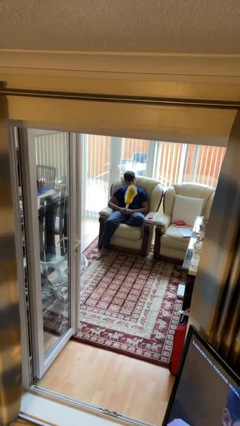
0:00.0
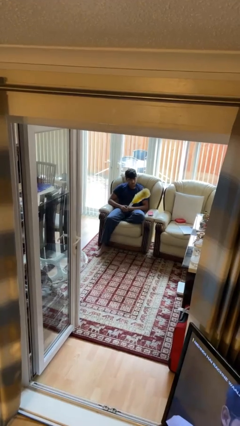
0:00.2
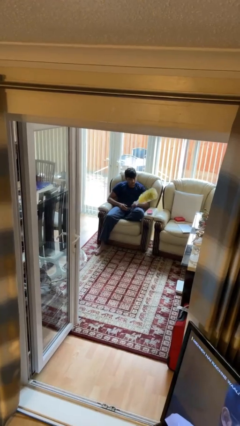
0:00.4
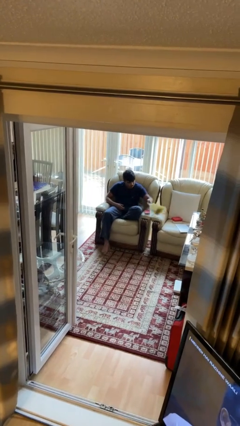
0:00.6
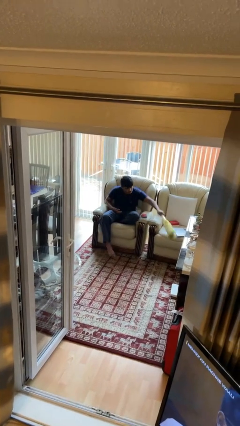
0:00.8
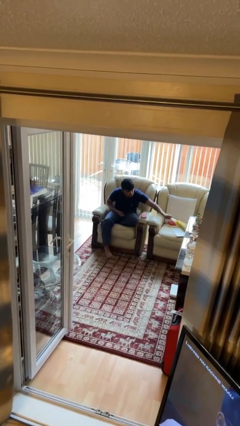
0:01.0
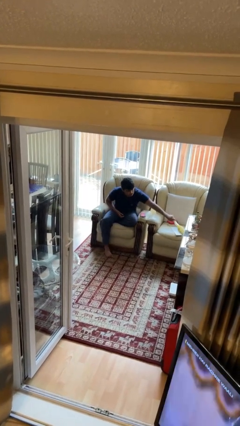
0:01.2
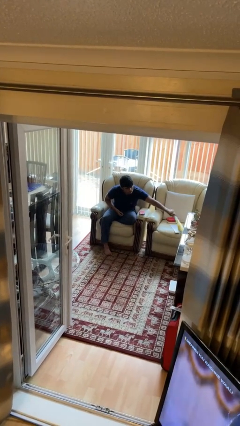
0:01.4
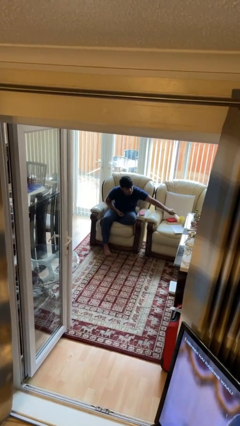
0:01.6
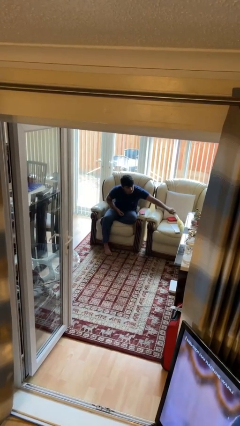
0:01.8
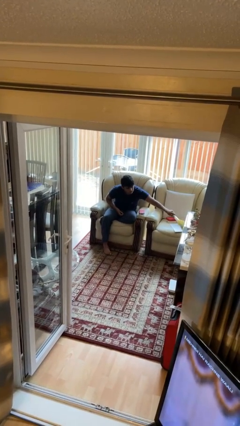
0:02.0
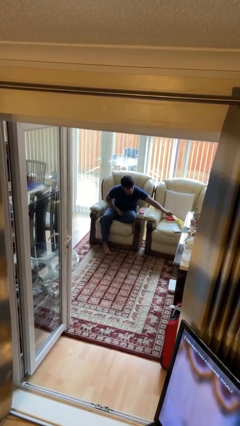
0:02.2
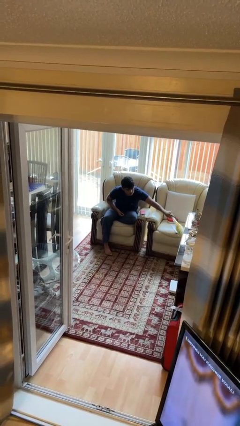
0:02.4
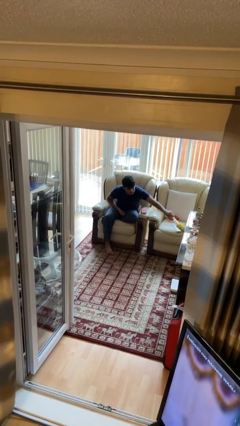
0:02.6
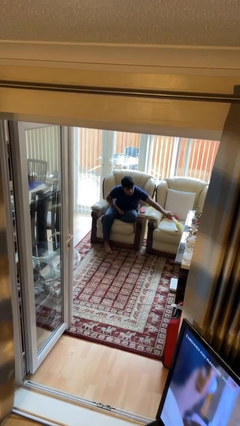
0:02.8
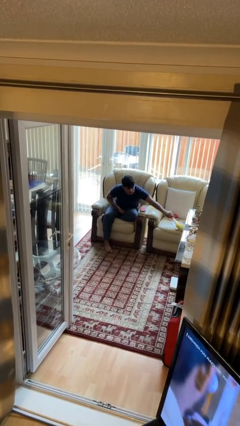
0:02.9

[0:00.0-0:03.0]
person dusts furniture

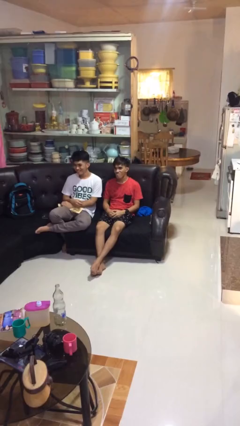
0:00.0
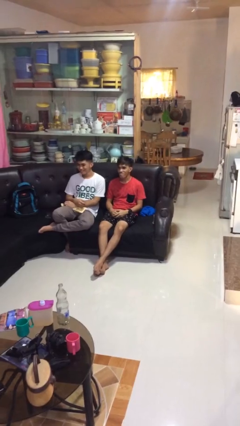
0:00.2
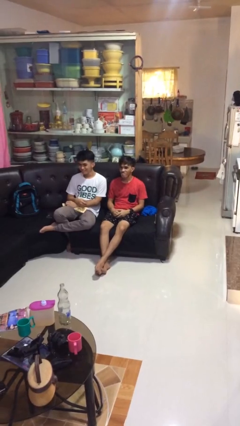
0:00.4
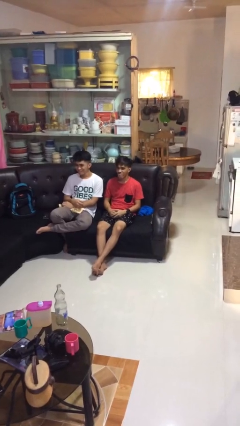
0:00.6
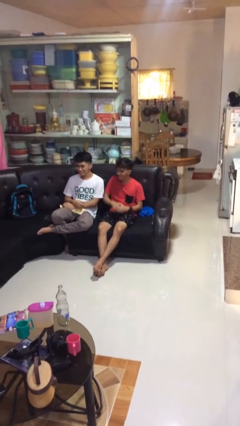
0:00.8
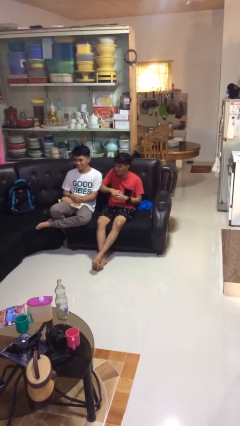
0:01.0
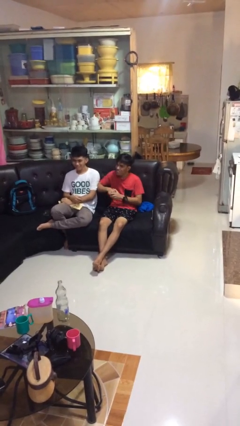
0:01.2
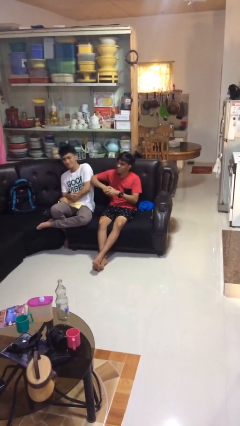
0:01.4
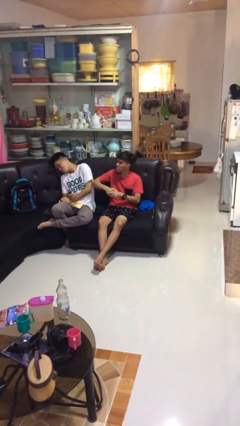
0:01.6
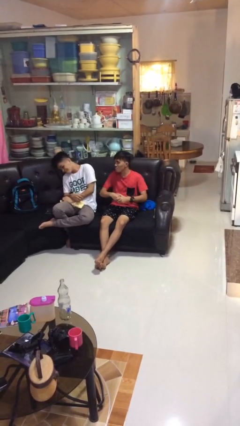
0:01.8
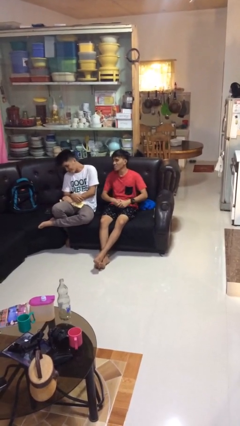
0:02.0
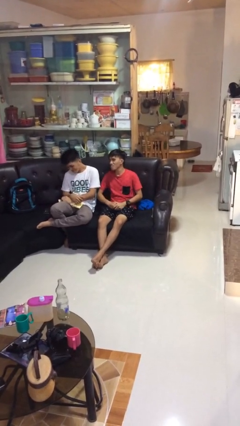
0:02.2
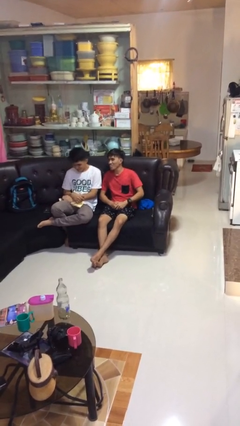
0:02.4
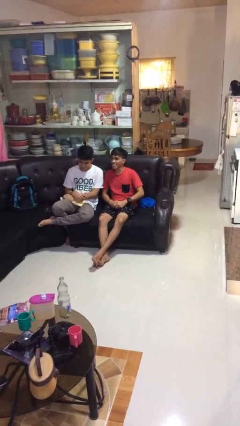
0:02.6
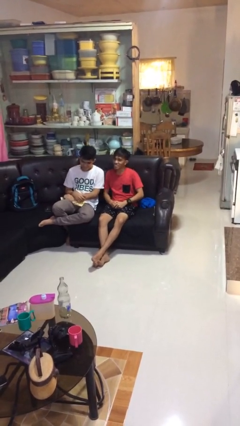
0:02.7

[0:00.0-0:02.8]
person nudges person with elbow

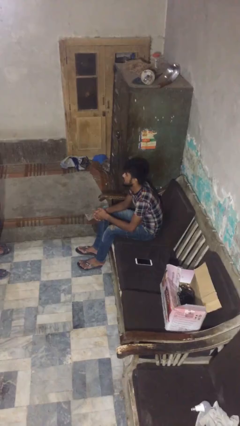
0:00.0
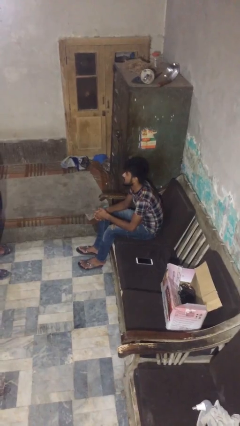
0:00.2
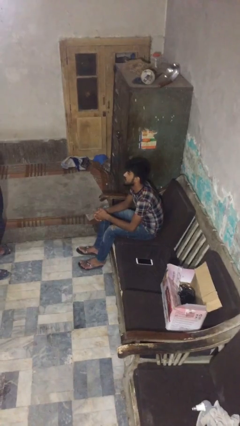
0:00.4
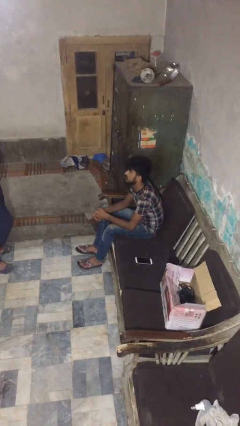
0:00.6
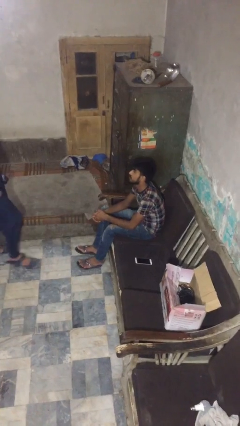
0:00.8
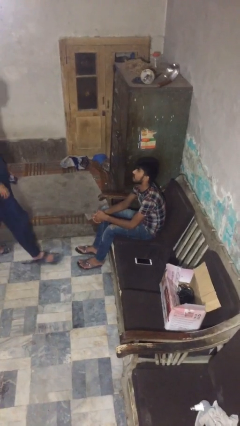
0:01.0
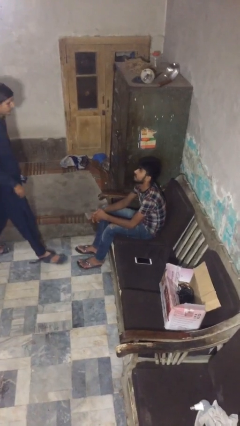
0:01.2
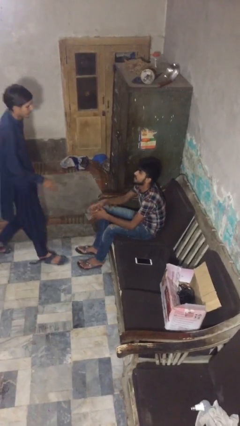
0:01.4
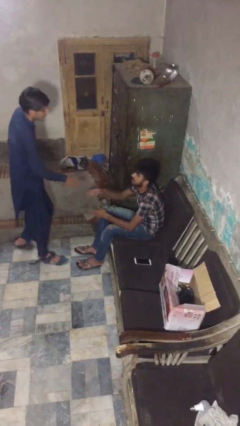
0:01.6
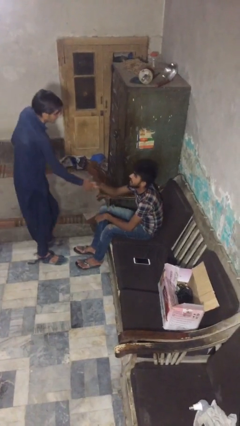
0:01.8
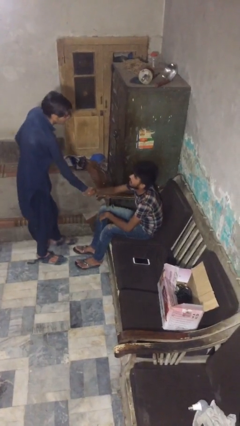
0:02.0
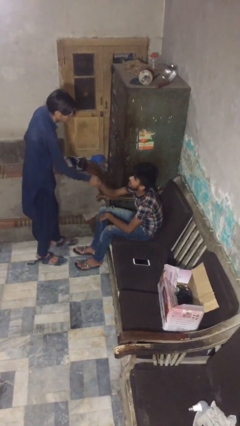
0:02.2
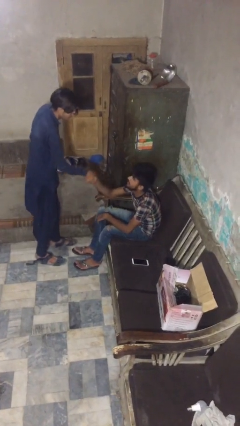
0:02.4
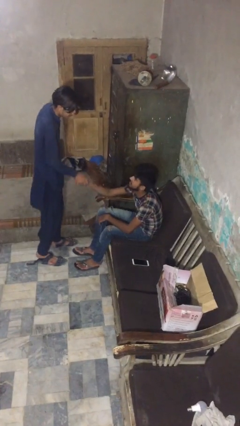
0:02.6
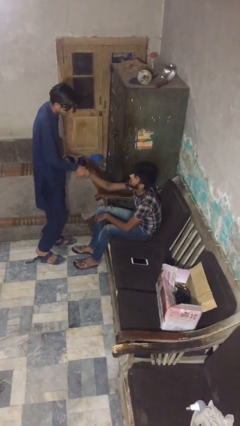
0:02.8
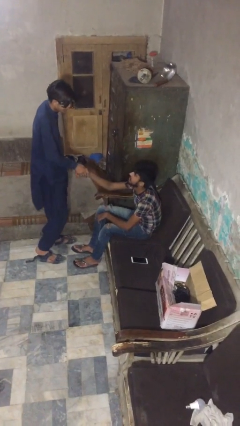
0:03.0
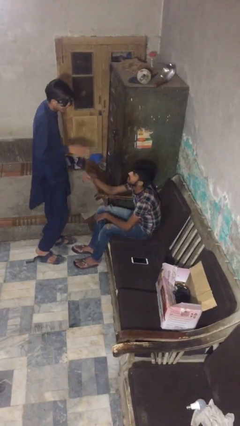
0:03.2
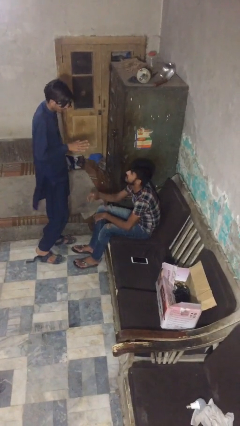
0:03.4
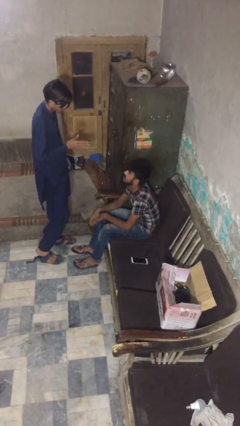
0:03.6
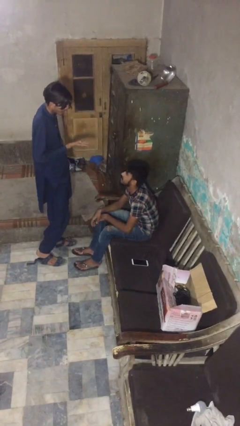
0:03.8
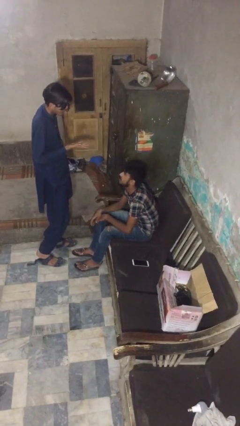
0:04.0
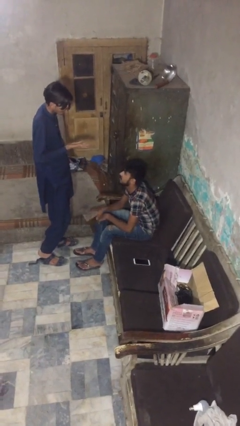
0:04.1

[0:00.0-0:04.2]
person shakes hand

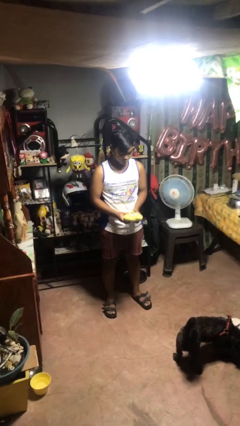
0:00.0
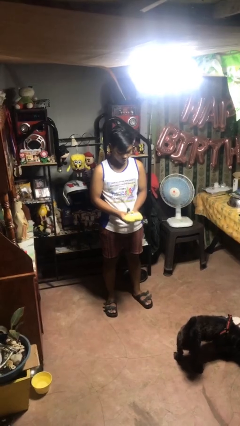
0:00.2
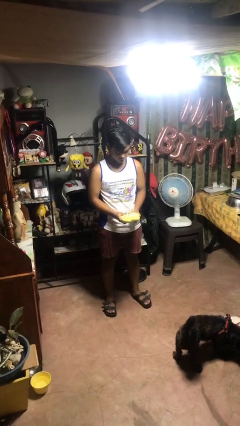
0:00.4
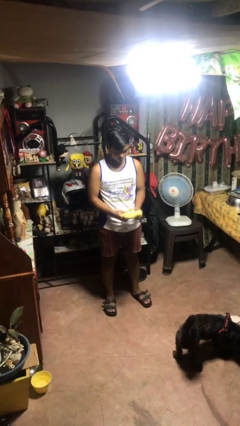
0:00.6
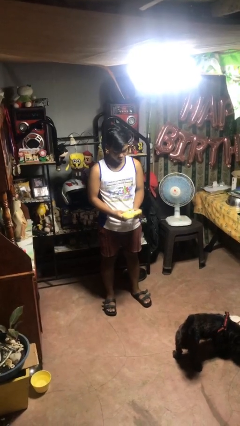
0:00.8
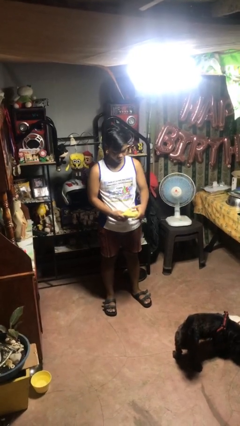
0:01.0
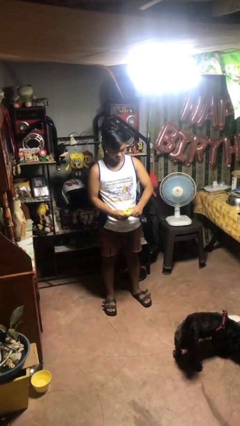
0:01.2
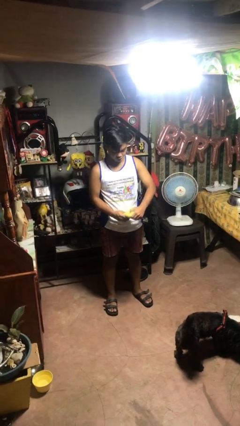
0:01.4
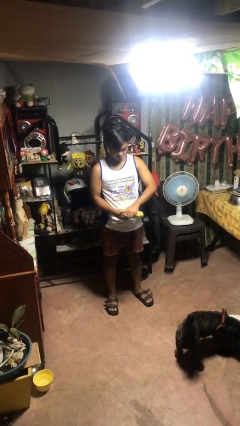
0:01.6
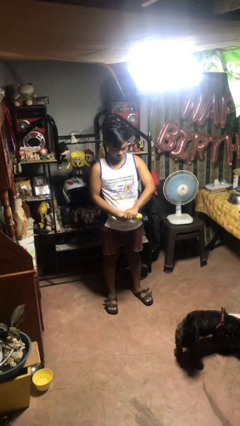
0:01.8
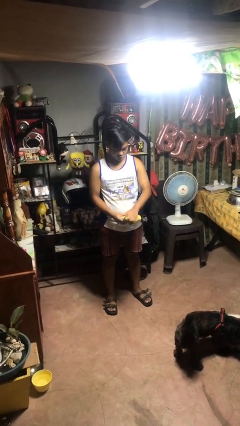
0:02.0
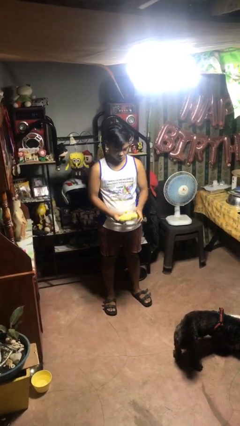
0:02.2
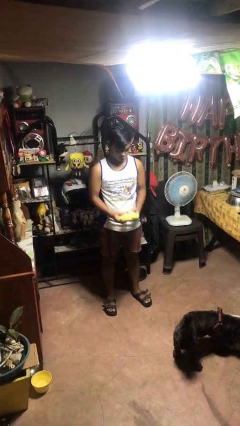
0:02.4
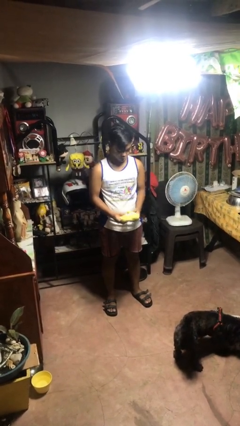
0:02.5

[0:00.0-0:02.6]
person squeezes object

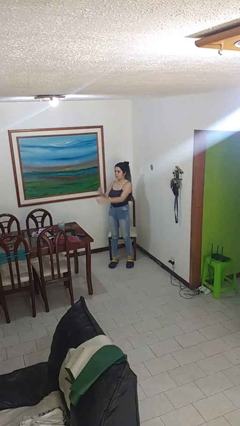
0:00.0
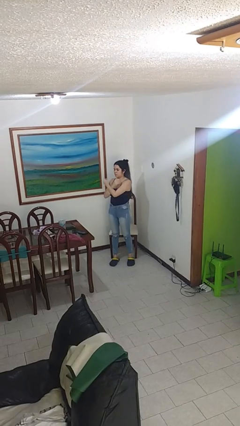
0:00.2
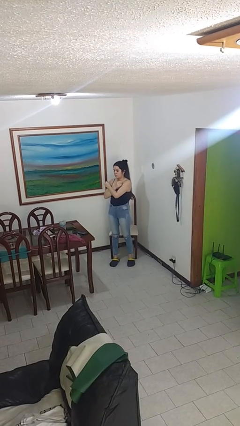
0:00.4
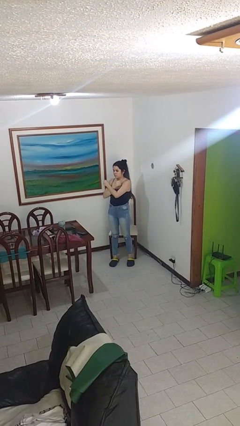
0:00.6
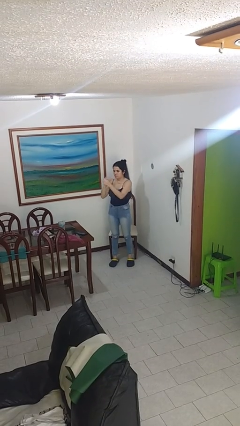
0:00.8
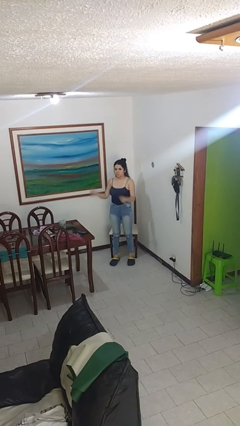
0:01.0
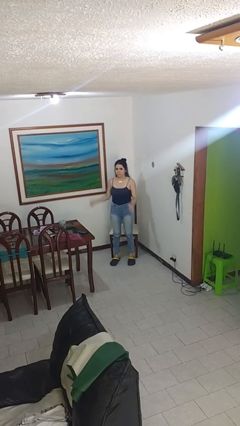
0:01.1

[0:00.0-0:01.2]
person gestures arms x

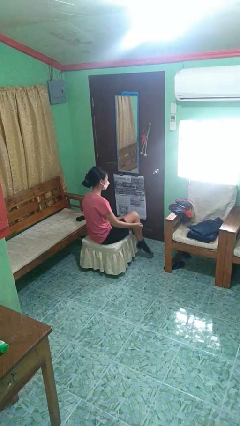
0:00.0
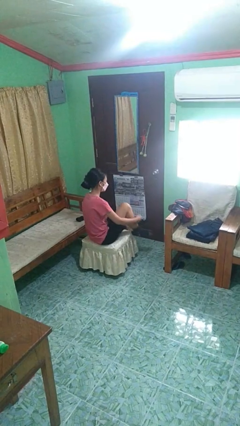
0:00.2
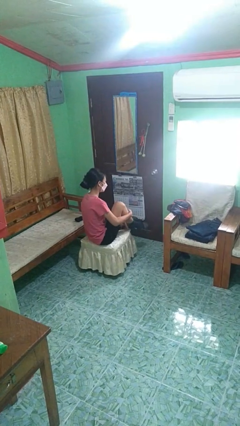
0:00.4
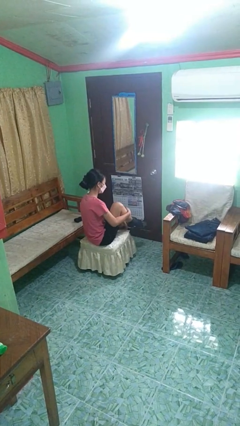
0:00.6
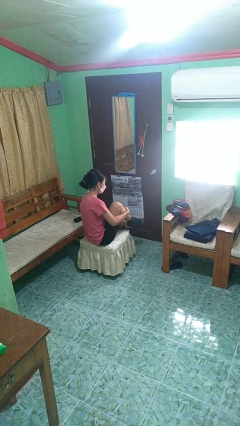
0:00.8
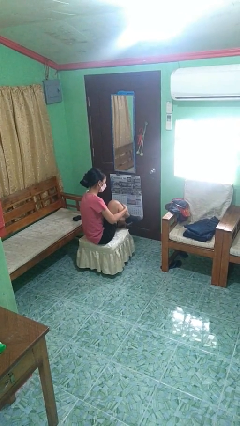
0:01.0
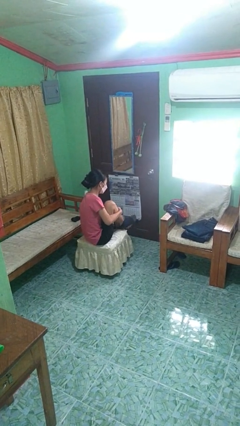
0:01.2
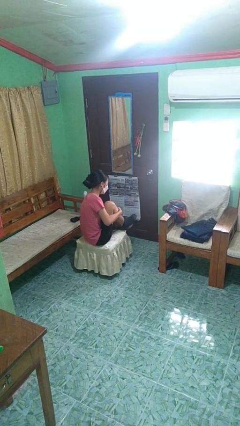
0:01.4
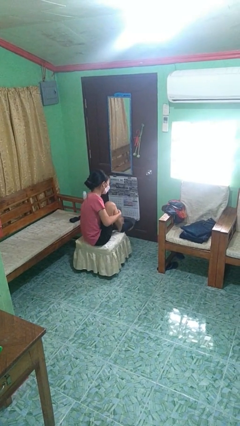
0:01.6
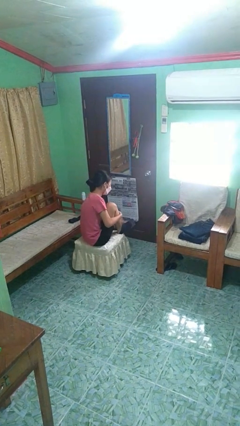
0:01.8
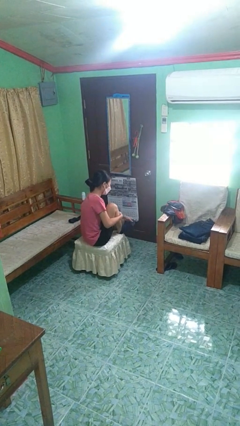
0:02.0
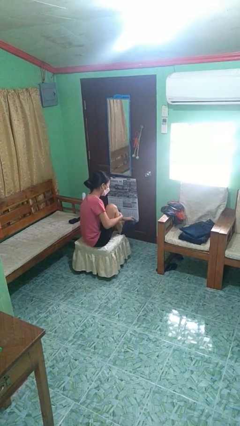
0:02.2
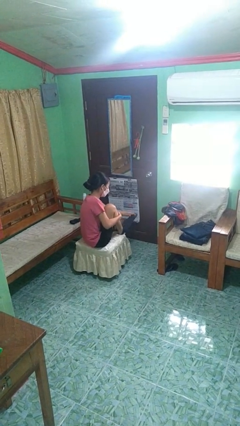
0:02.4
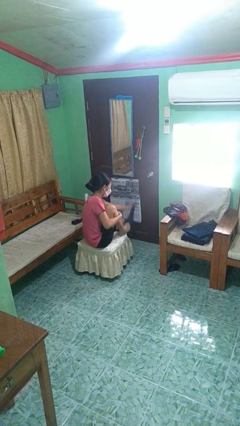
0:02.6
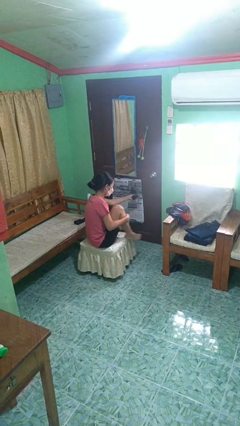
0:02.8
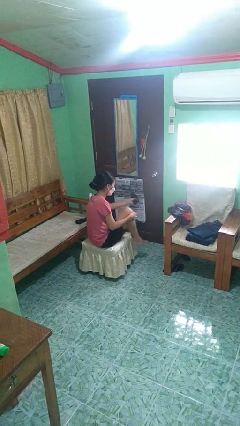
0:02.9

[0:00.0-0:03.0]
person takes off socks

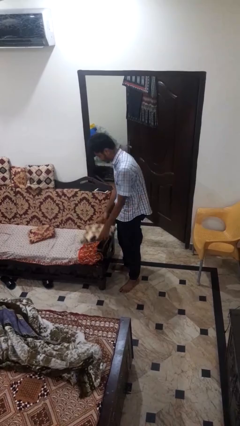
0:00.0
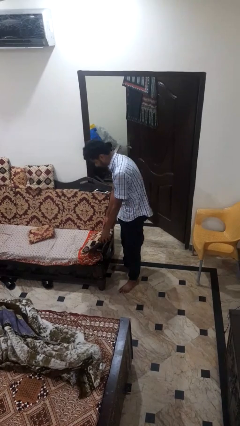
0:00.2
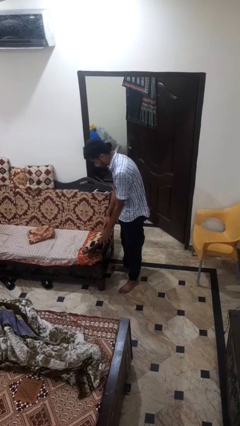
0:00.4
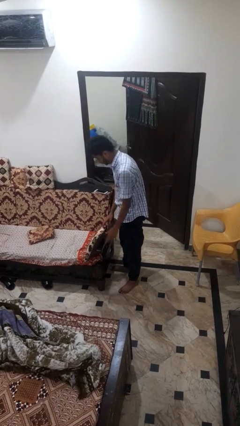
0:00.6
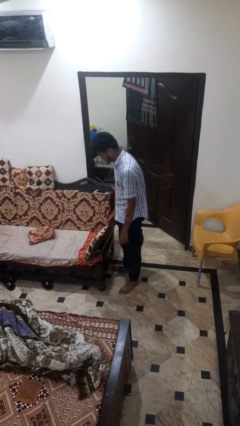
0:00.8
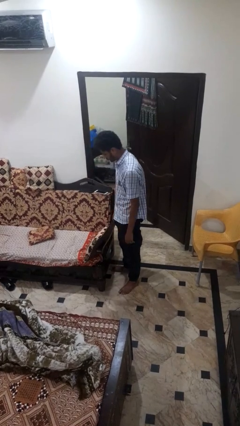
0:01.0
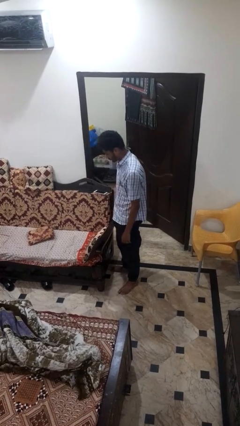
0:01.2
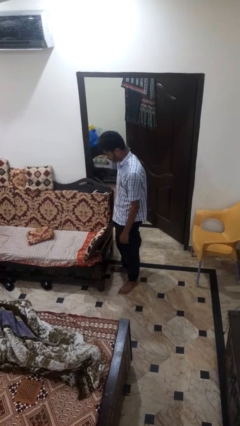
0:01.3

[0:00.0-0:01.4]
person puts down object on couch
